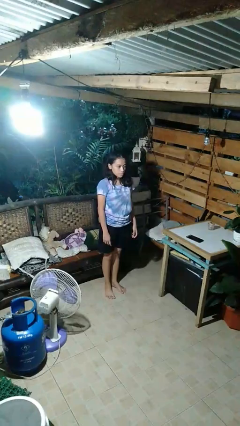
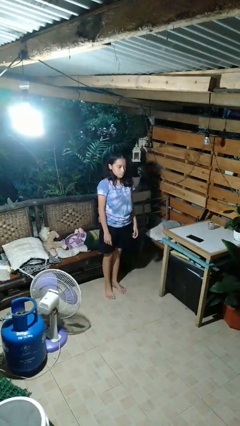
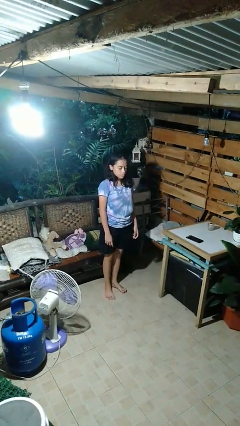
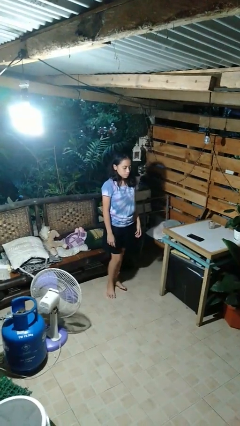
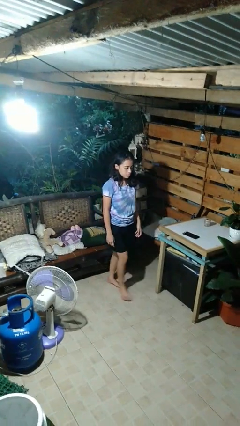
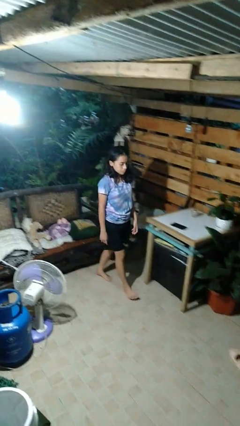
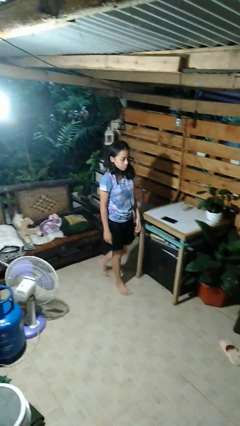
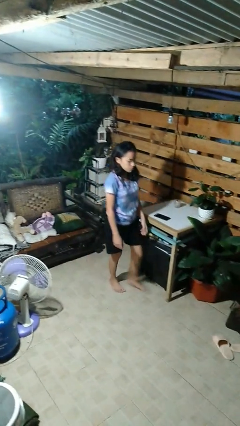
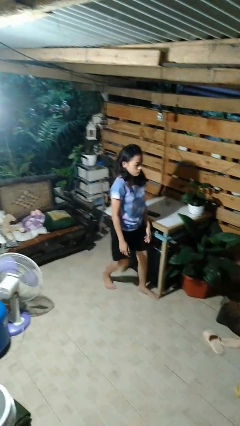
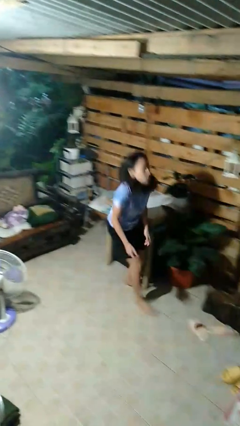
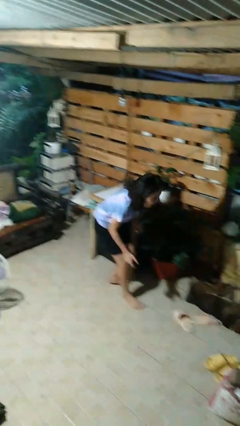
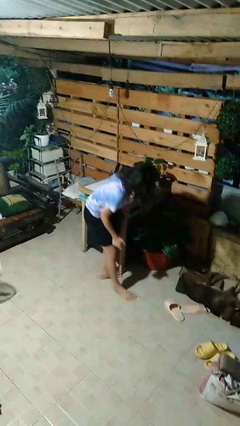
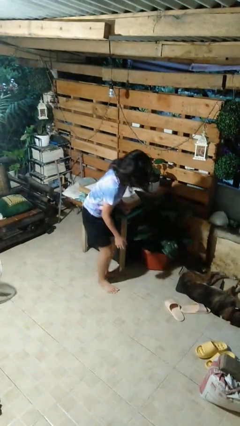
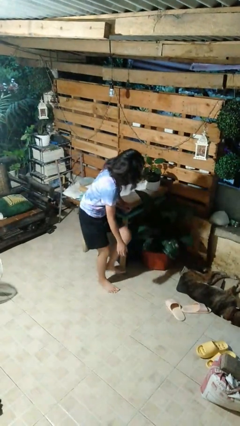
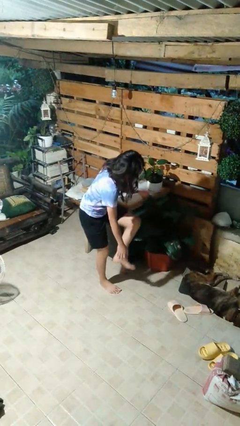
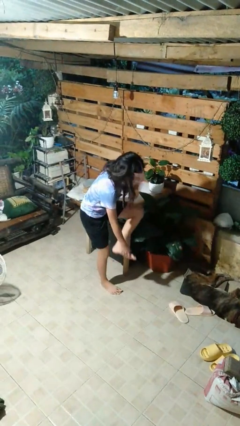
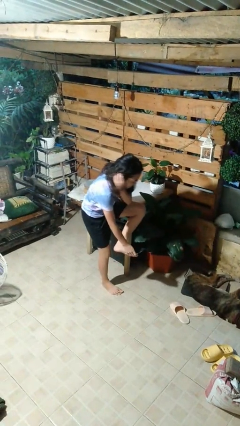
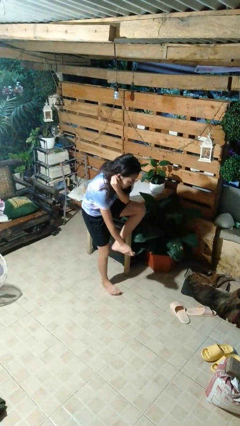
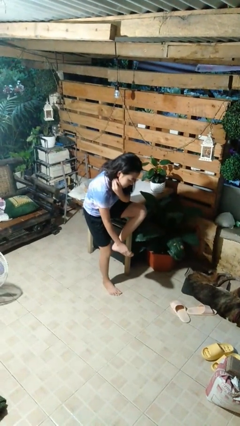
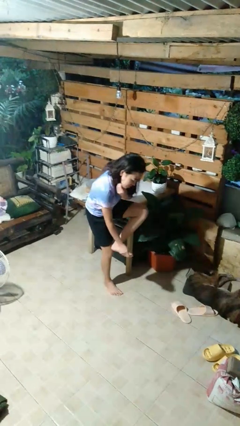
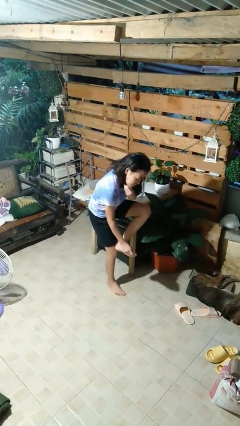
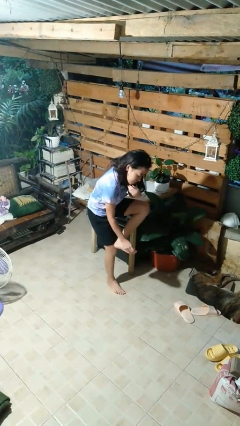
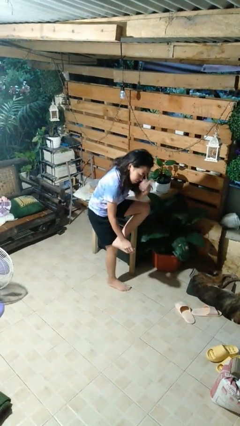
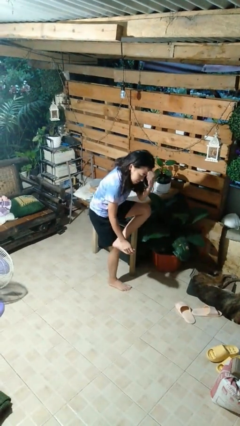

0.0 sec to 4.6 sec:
person stubs toe

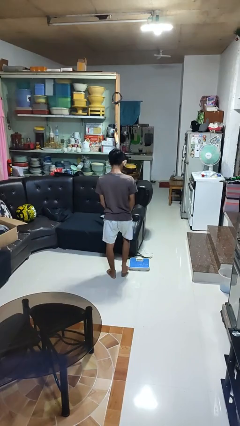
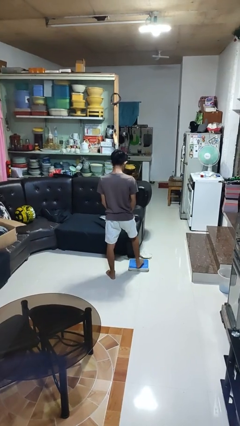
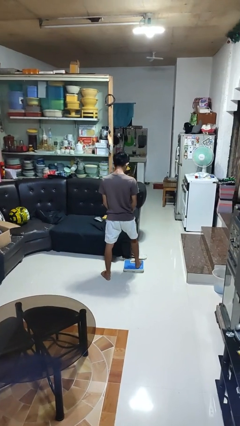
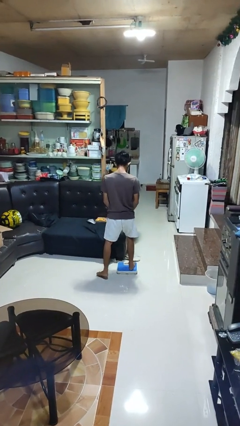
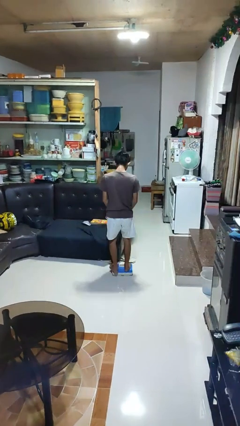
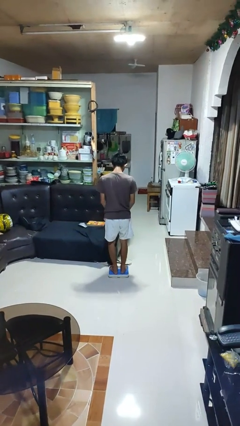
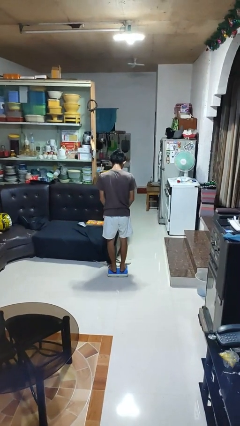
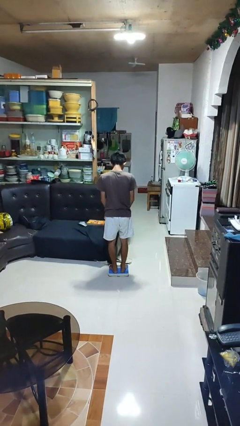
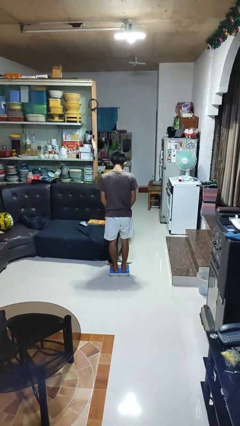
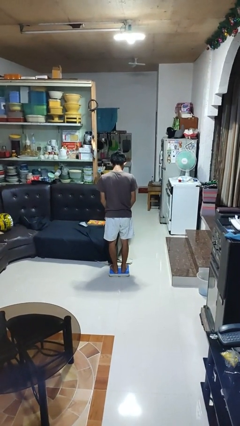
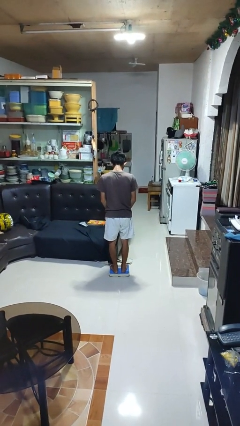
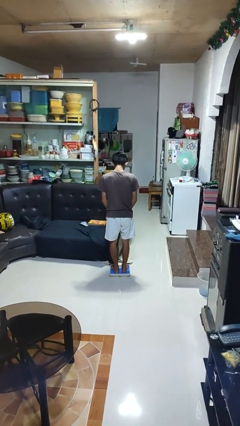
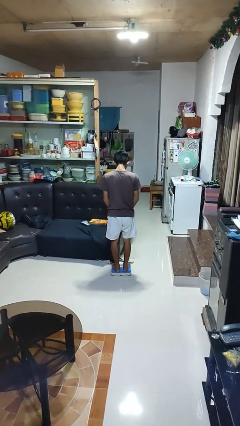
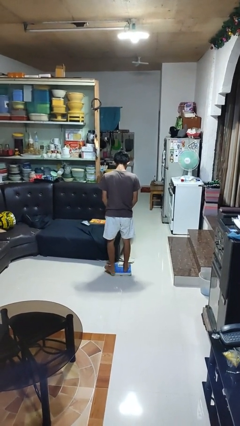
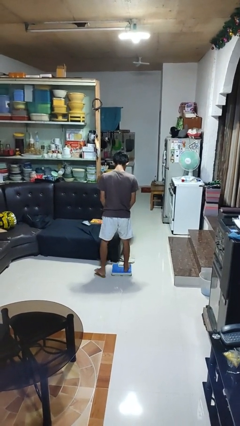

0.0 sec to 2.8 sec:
person uses bodyweight scale

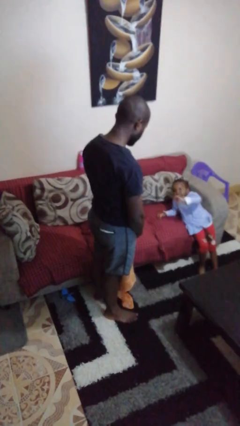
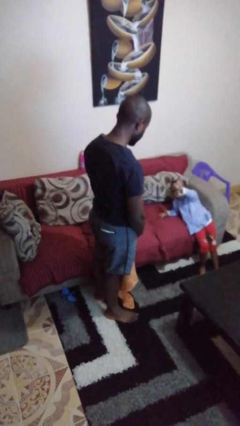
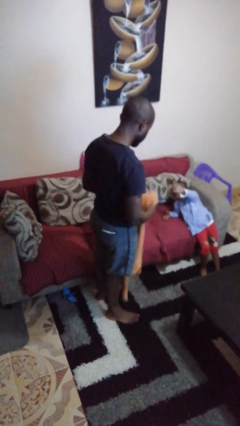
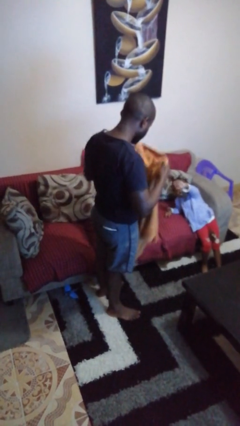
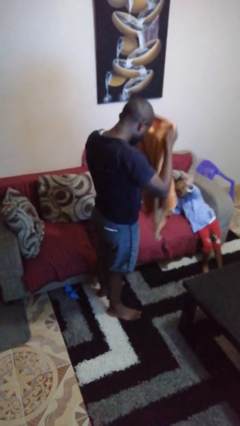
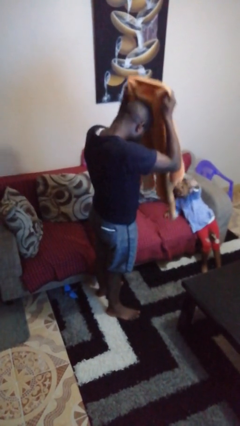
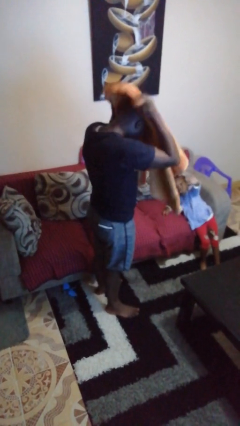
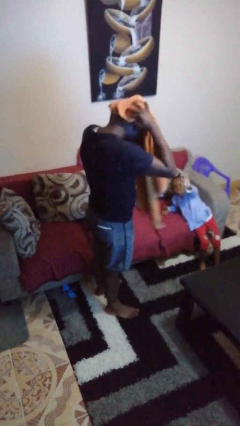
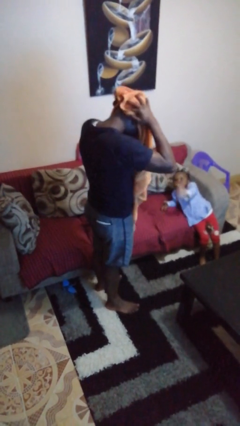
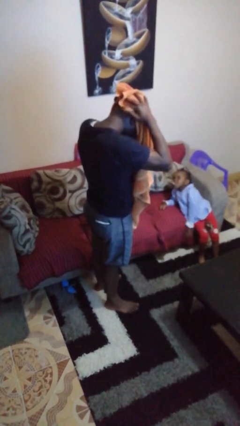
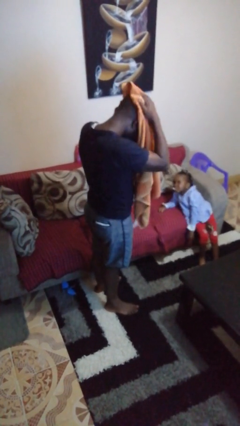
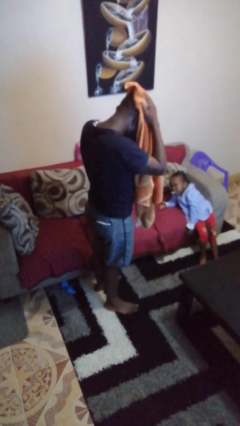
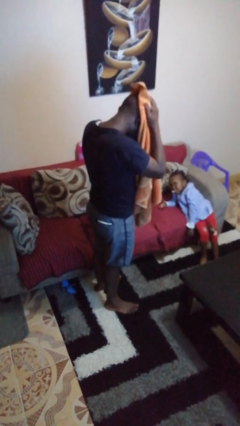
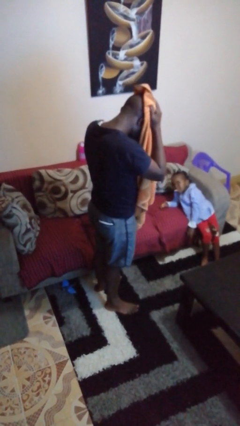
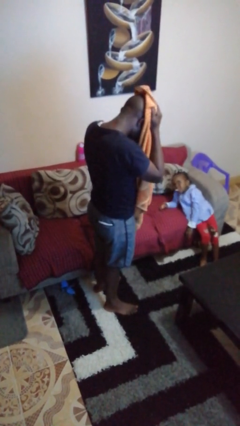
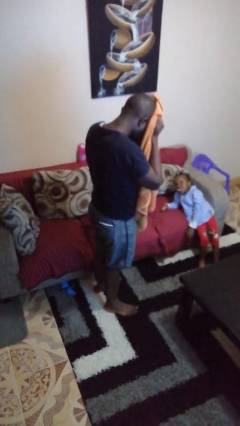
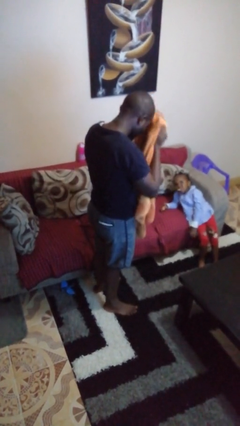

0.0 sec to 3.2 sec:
person dries hair with towel

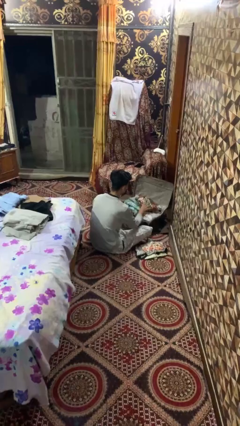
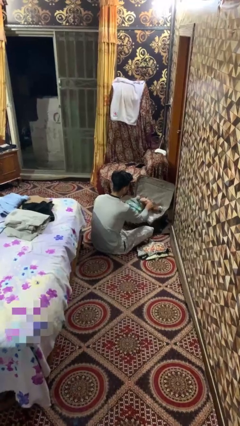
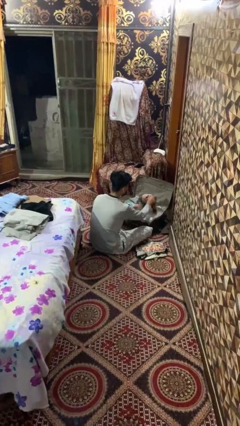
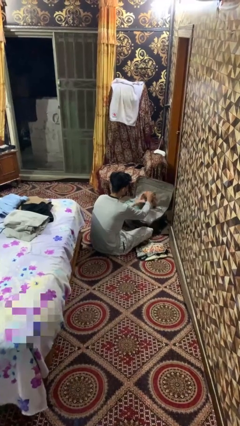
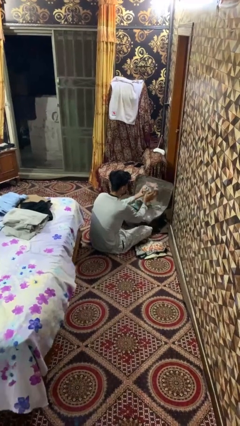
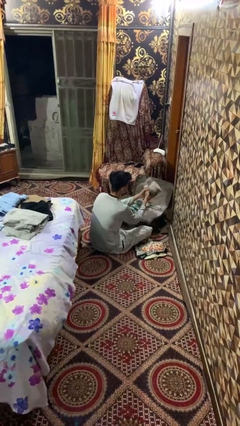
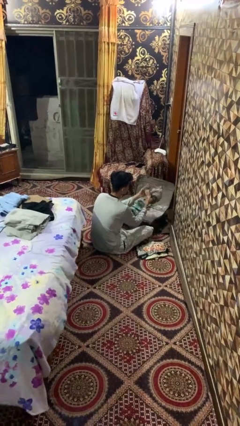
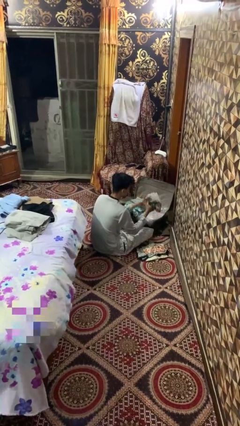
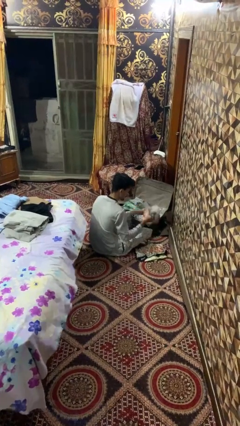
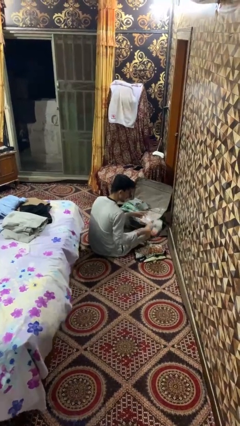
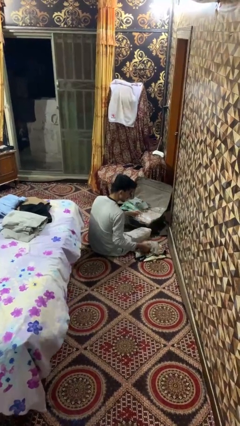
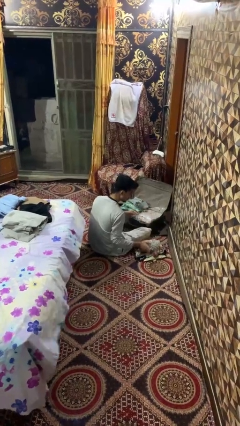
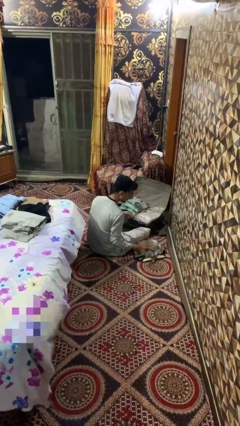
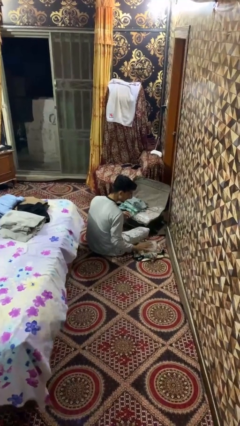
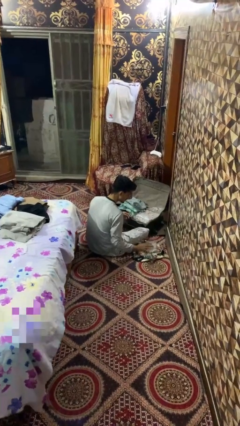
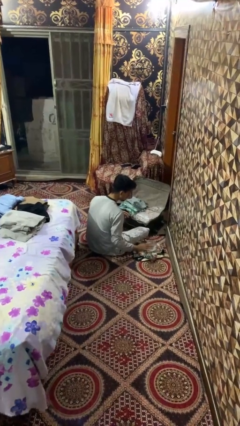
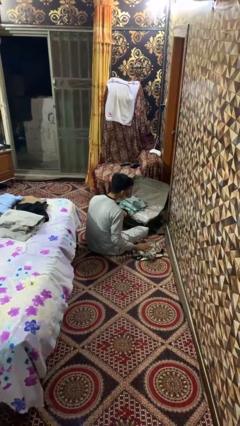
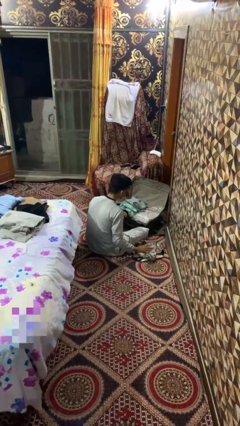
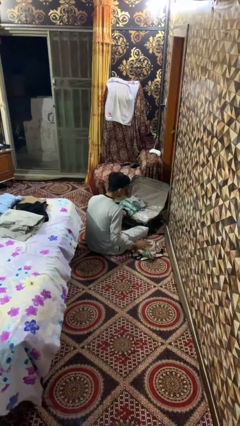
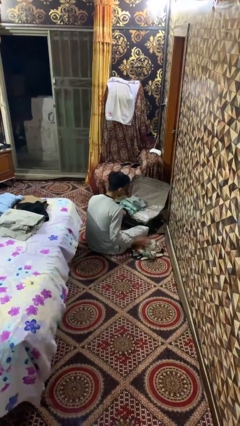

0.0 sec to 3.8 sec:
person unloads clothes from suitcase

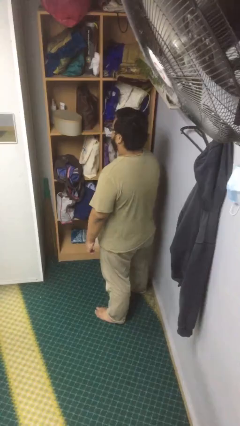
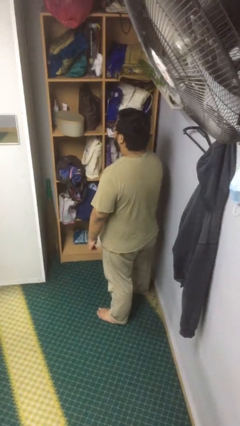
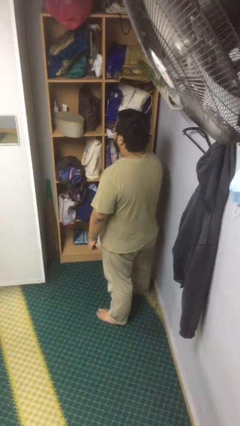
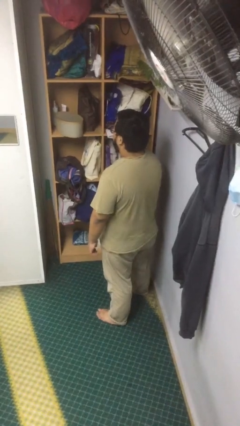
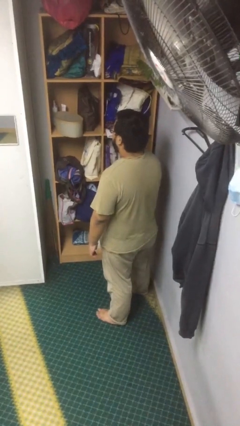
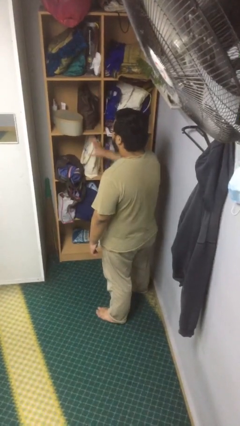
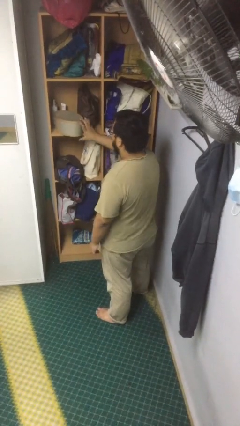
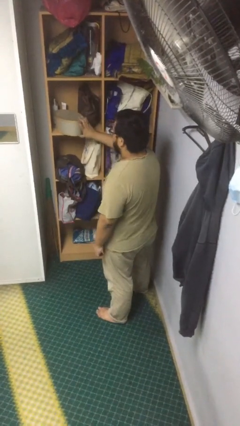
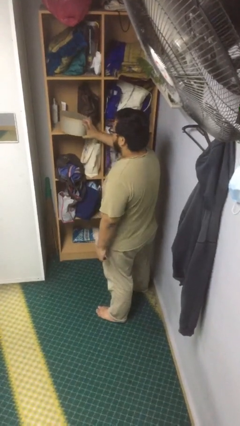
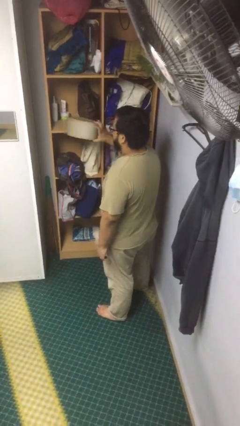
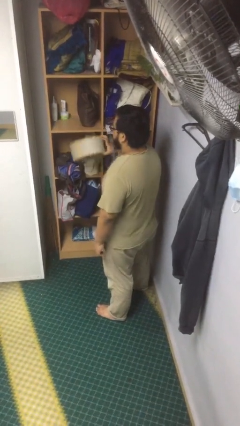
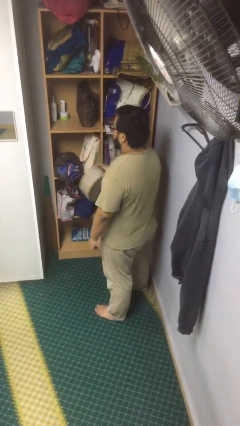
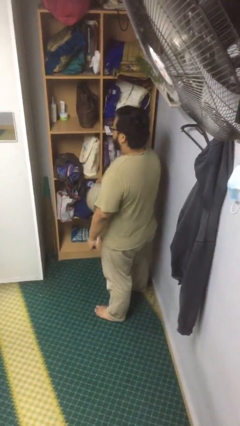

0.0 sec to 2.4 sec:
person picks up object from cabinet

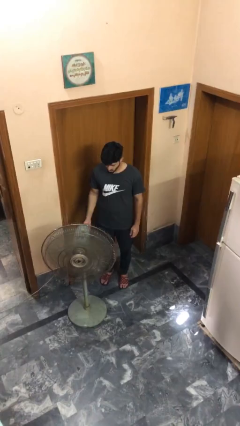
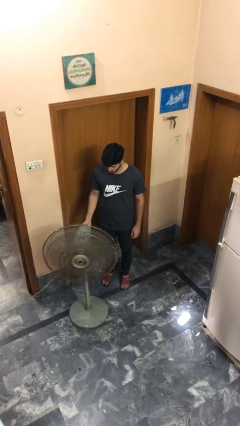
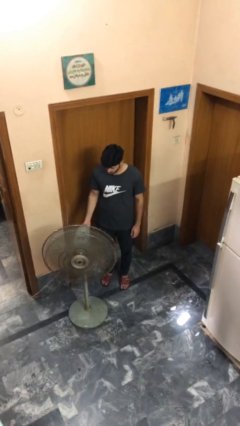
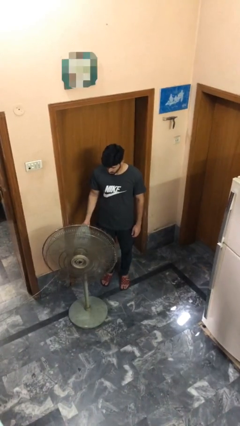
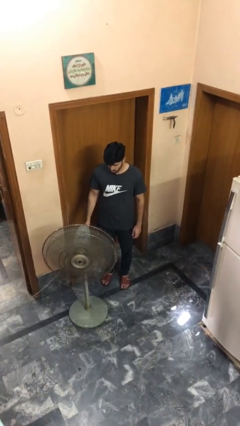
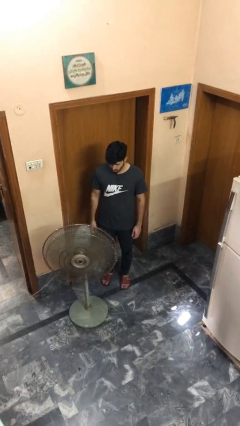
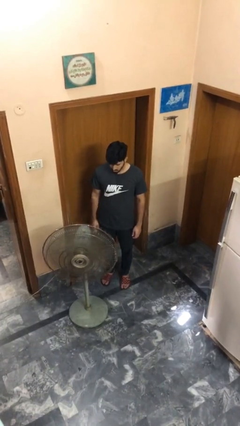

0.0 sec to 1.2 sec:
person turns off fan
